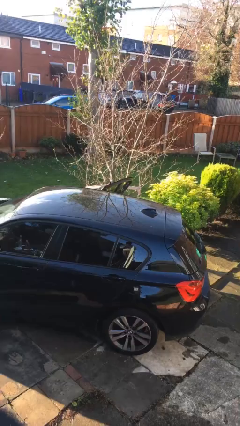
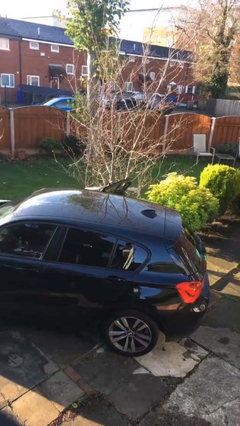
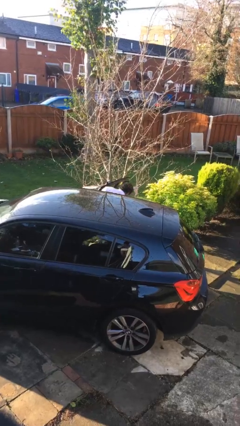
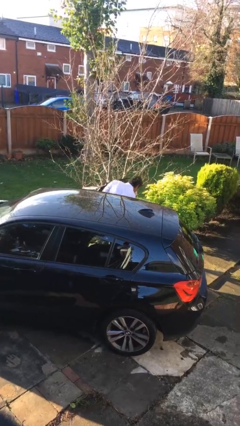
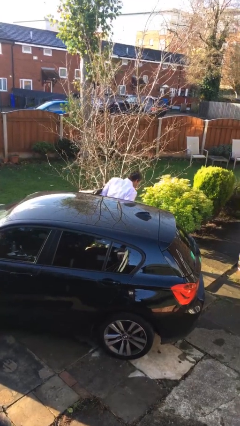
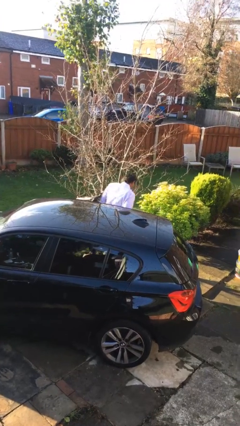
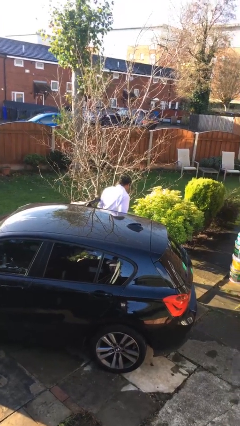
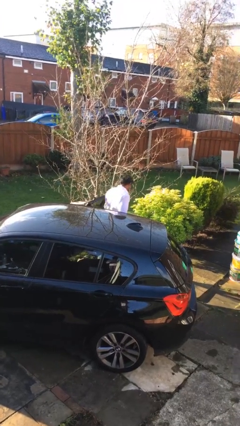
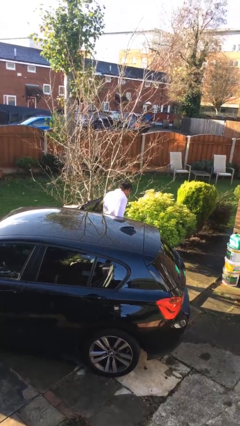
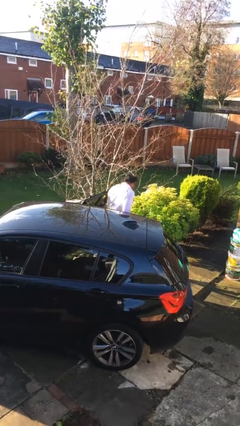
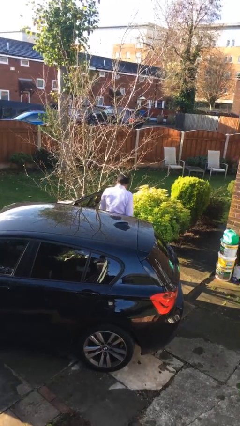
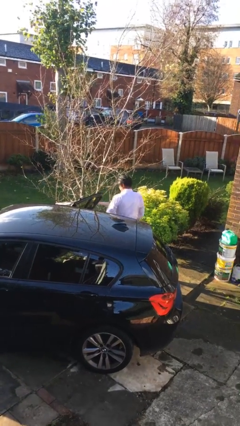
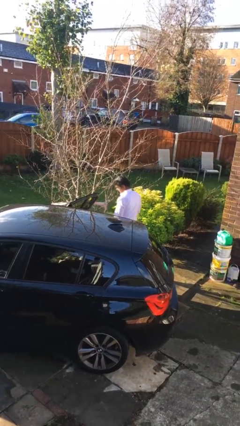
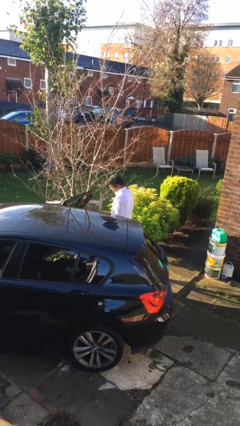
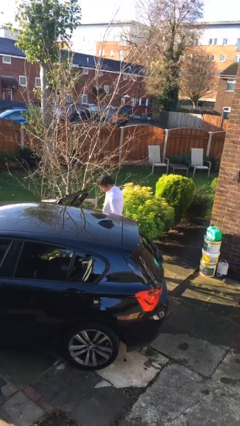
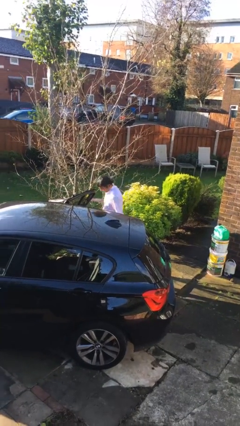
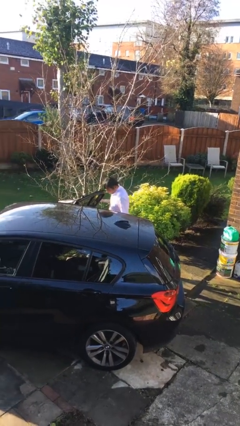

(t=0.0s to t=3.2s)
person exits car

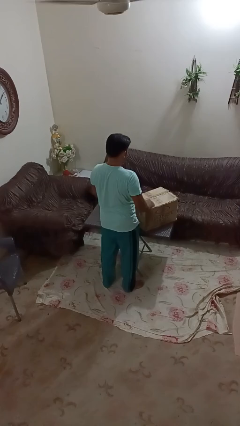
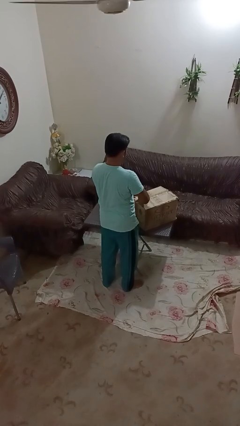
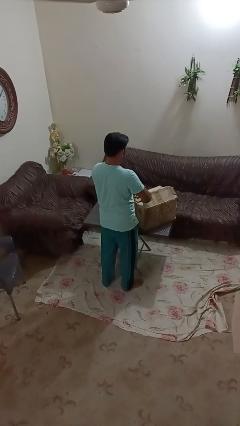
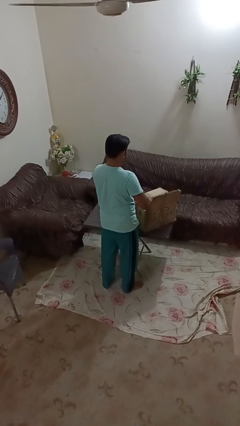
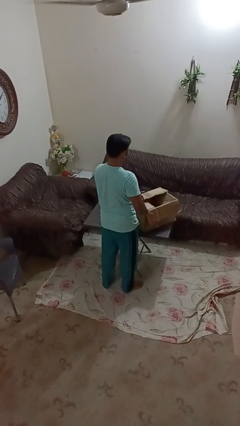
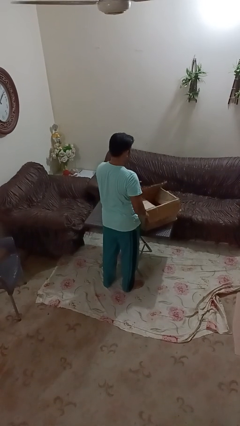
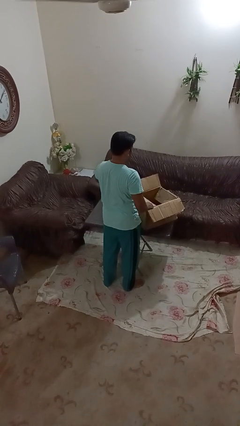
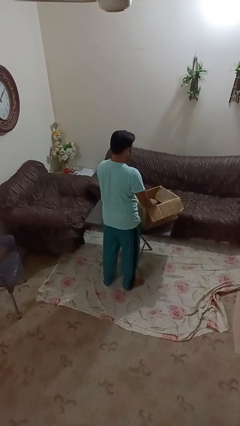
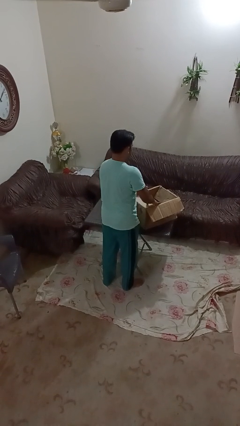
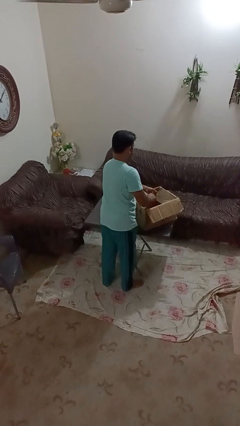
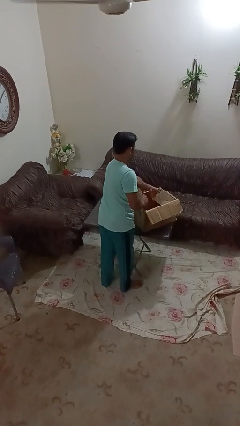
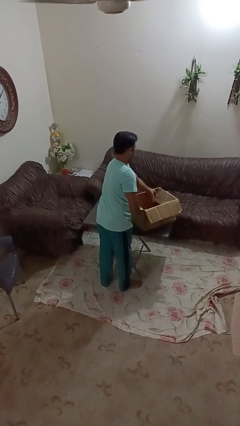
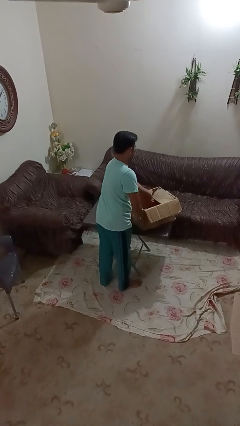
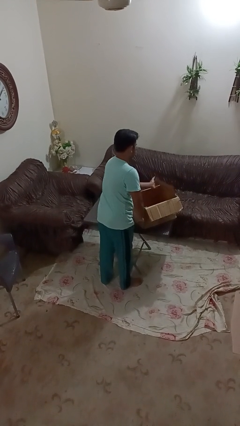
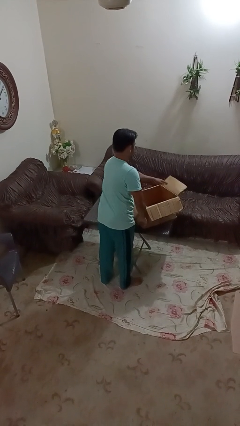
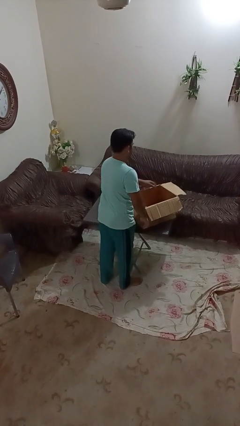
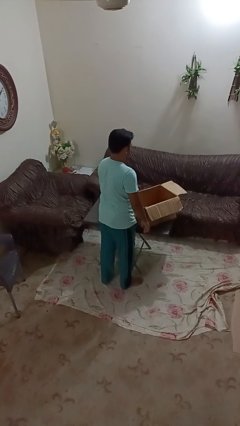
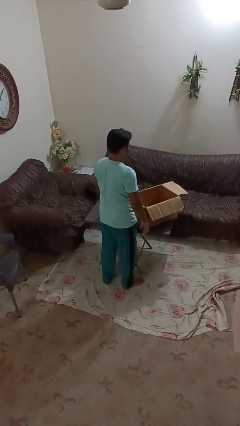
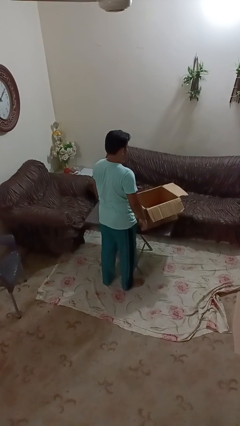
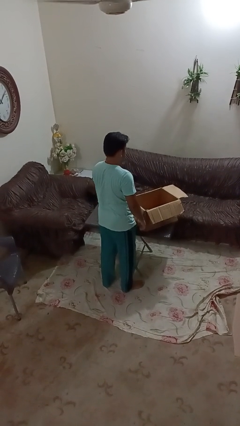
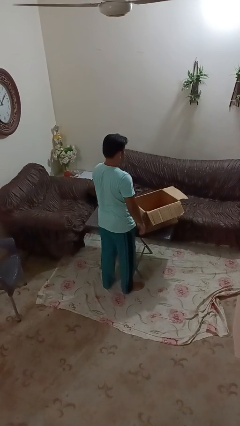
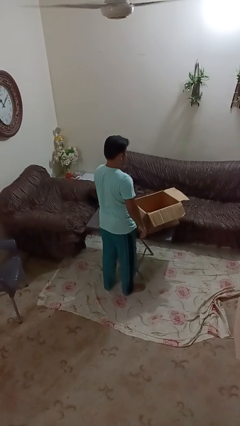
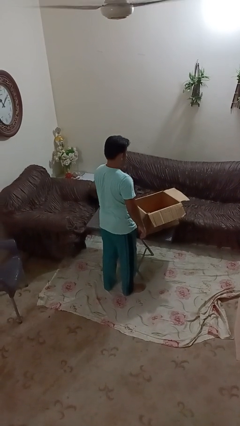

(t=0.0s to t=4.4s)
person opens box

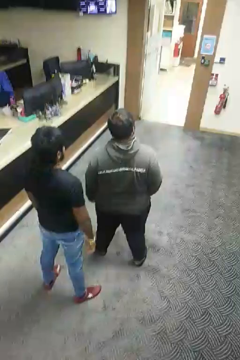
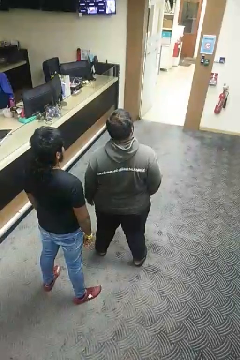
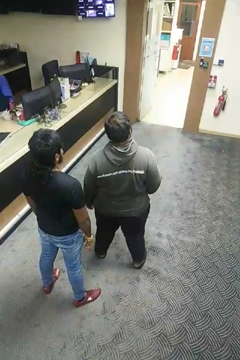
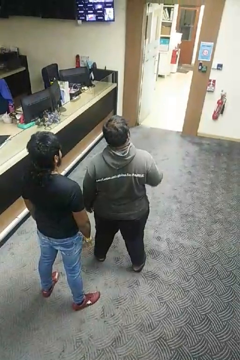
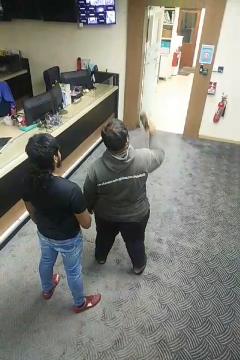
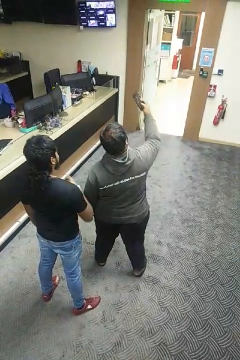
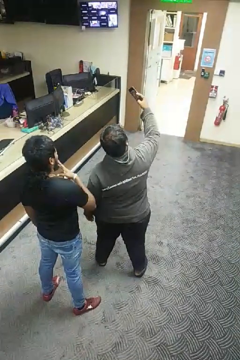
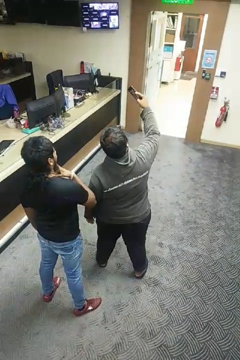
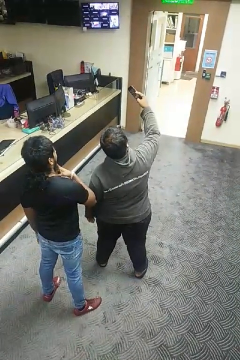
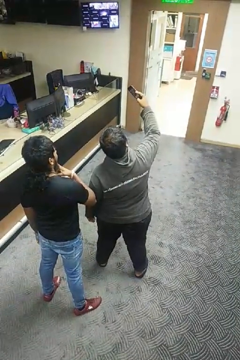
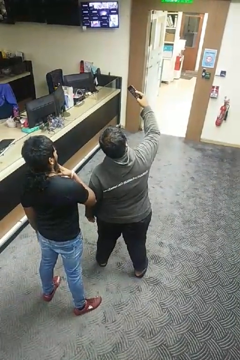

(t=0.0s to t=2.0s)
person takes selfie with person

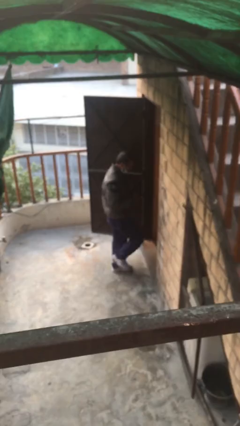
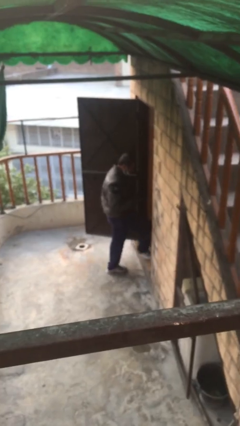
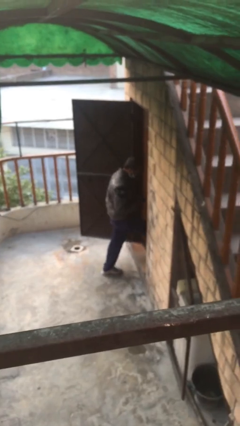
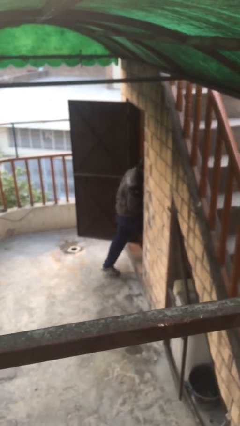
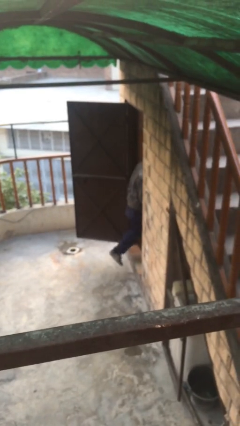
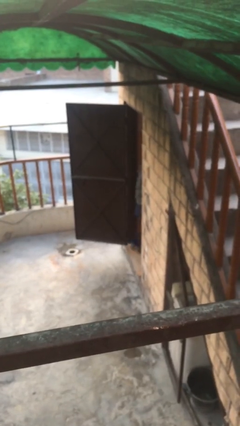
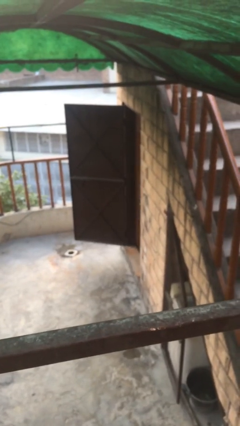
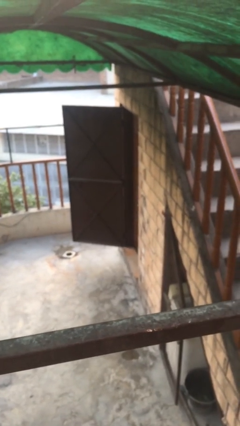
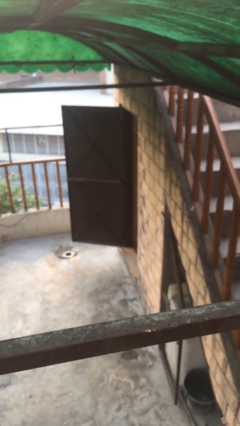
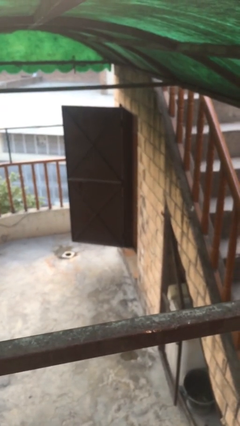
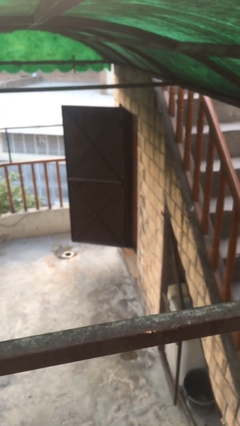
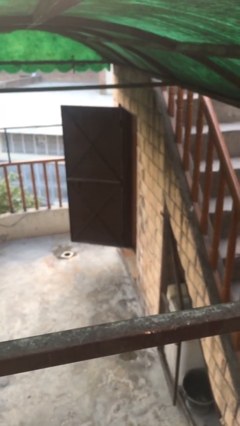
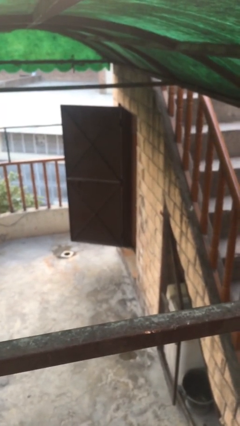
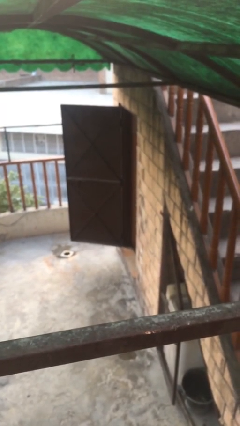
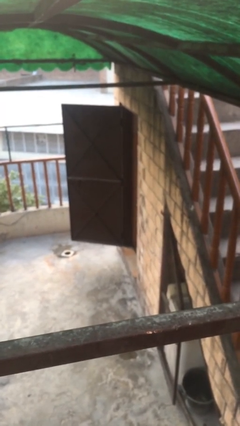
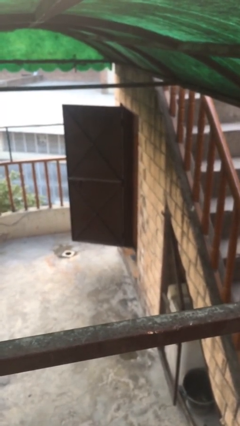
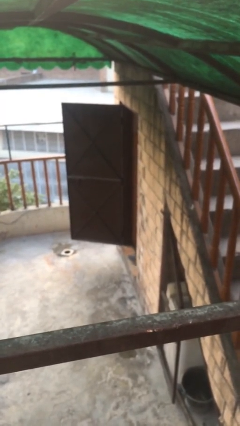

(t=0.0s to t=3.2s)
person exits scene through structure

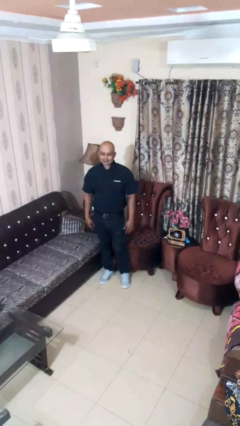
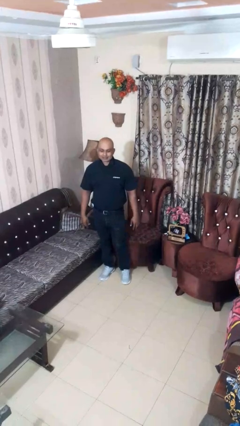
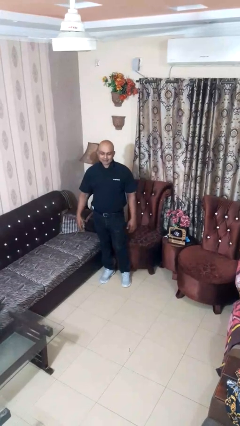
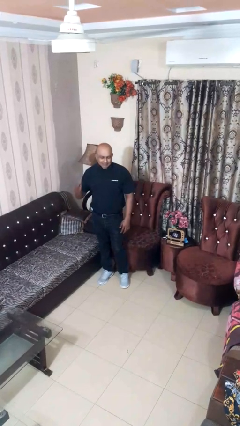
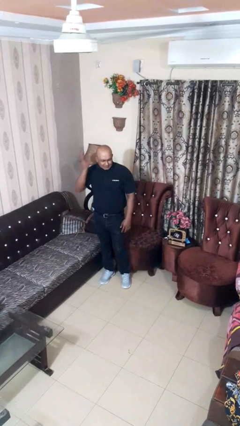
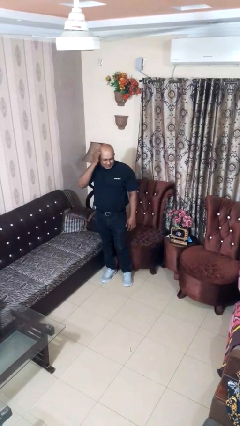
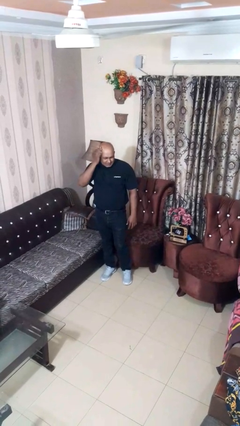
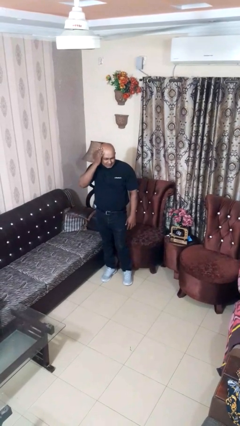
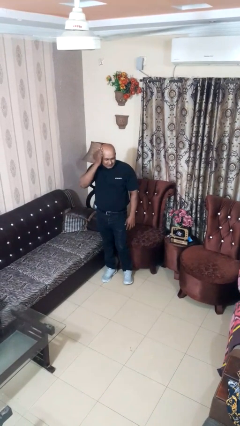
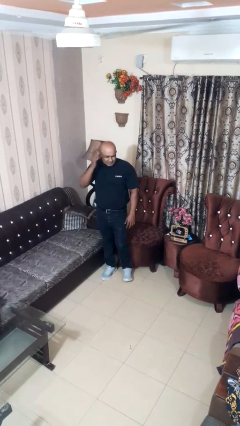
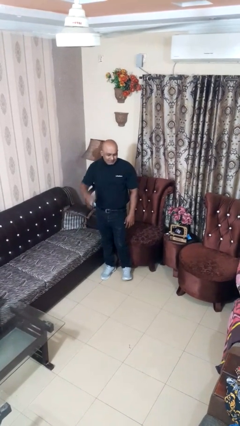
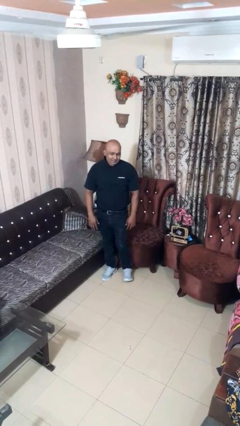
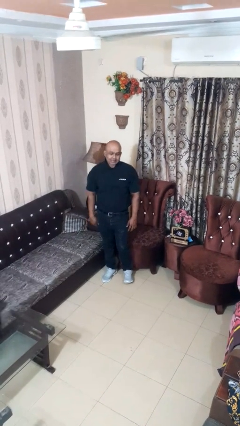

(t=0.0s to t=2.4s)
person pats head

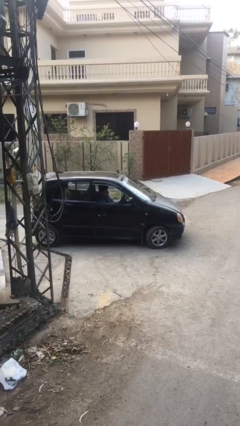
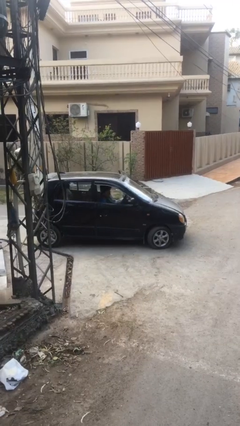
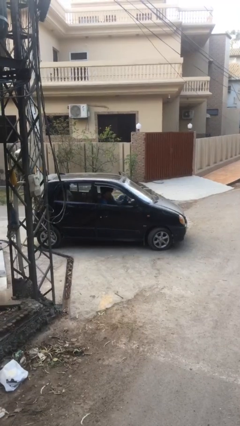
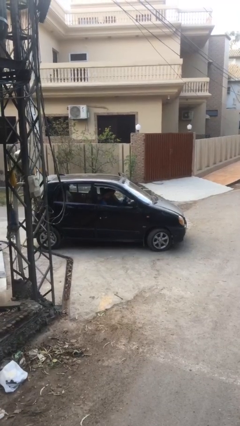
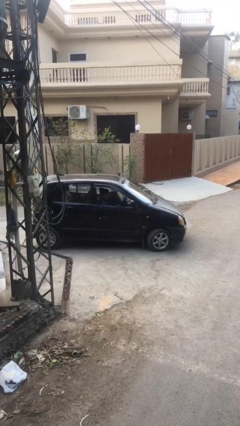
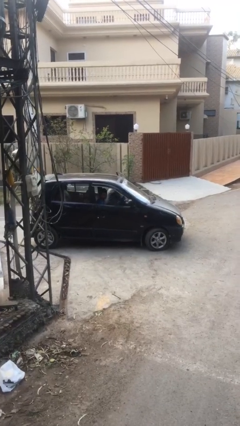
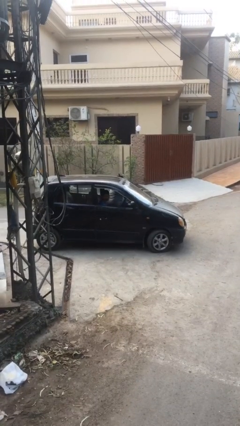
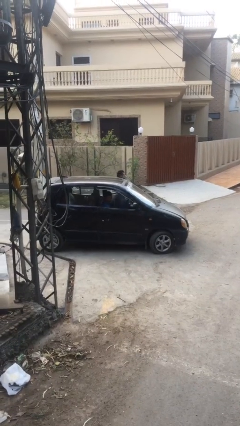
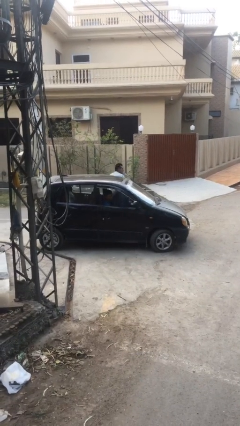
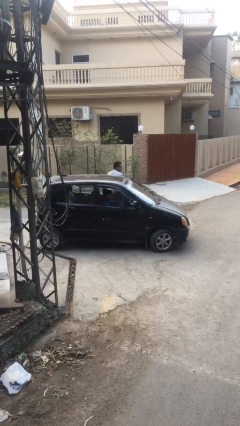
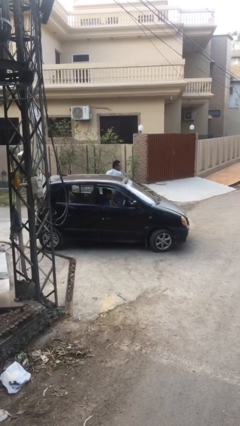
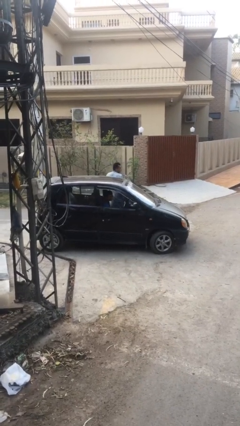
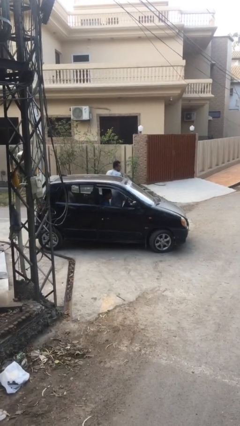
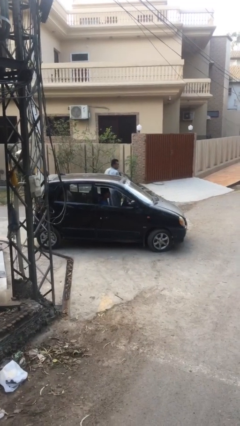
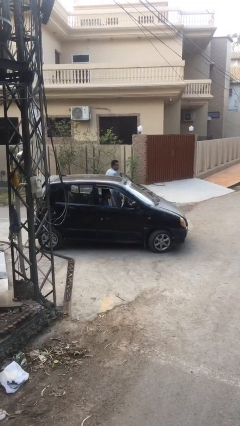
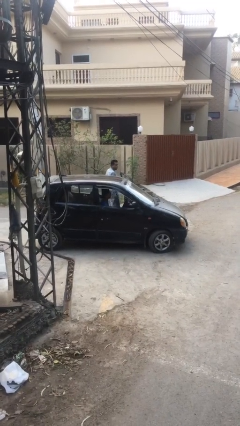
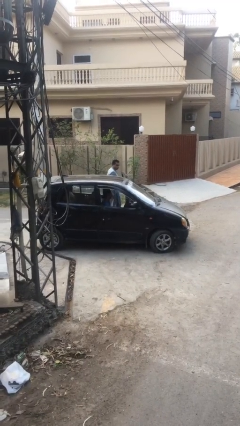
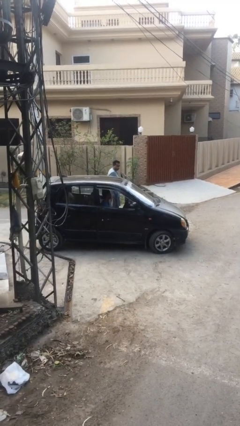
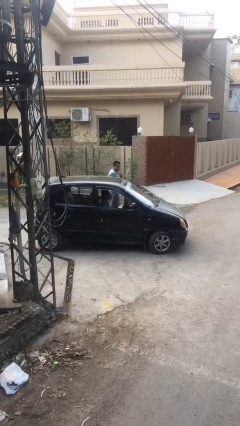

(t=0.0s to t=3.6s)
car drops off person
